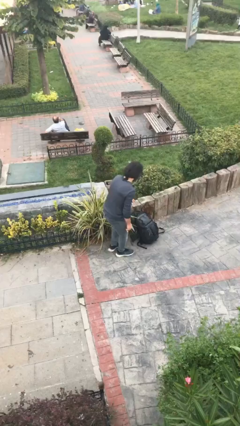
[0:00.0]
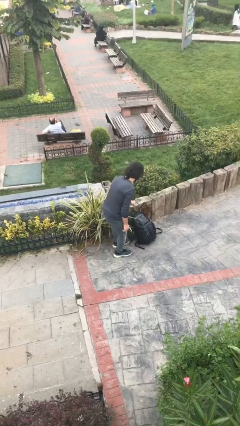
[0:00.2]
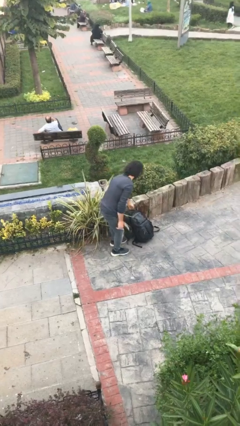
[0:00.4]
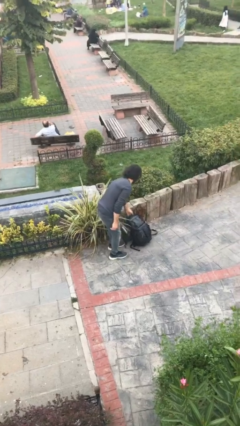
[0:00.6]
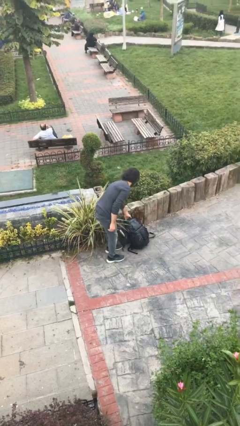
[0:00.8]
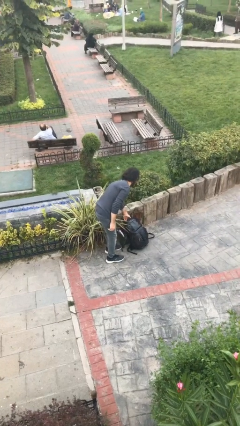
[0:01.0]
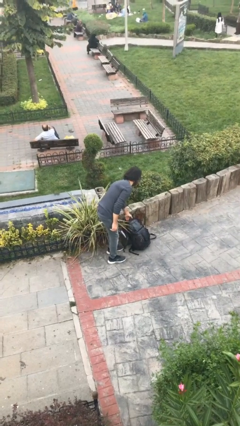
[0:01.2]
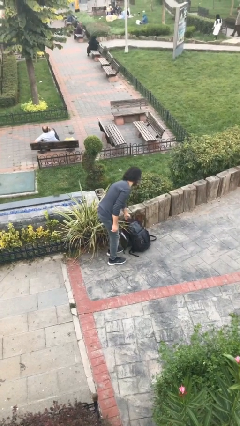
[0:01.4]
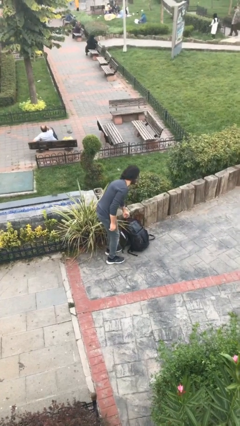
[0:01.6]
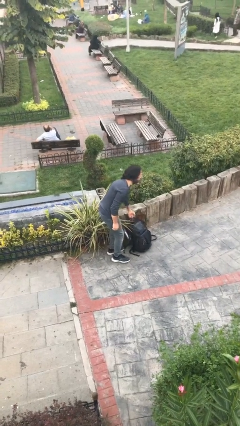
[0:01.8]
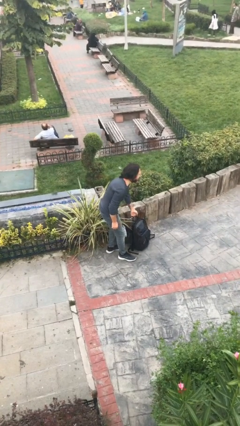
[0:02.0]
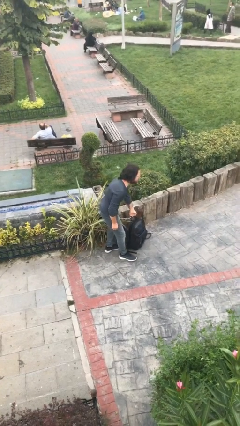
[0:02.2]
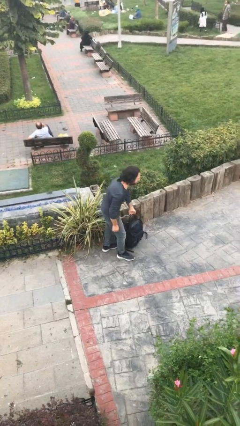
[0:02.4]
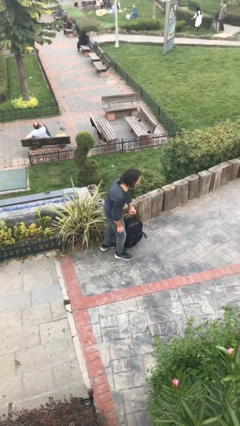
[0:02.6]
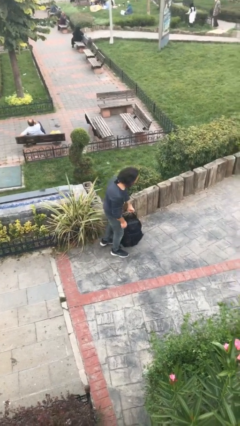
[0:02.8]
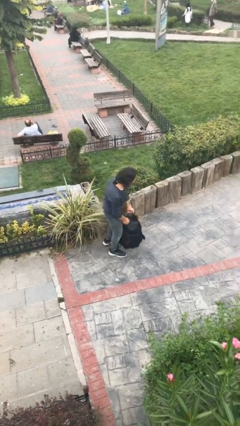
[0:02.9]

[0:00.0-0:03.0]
person picks up object from floor

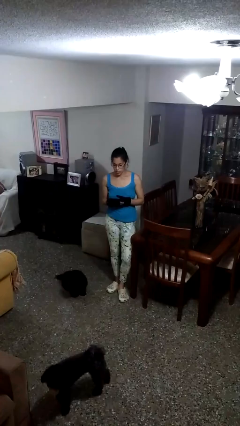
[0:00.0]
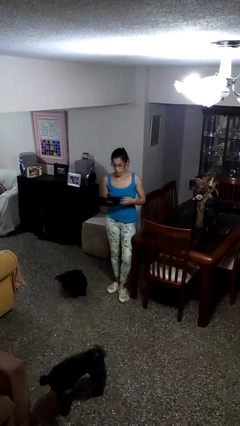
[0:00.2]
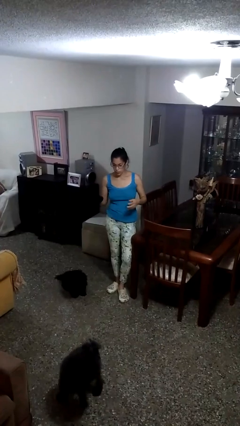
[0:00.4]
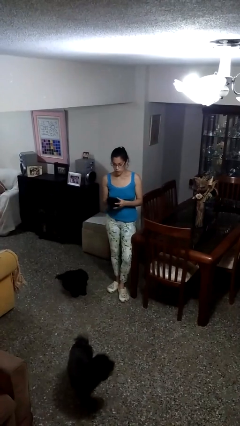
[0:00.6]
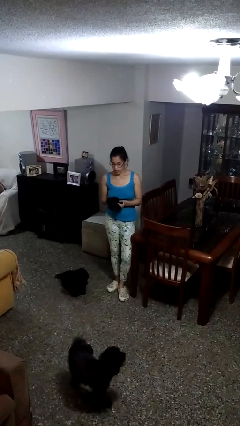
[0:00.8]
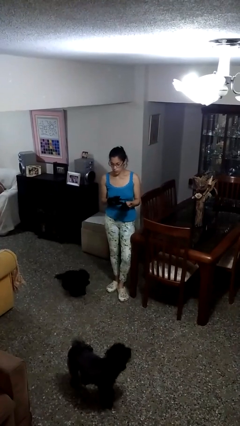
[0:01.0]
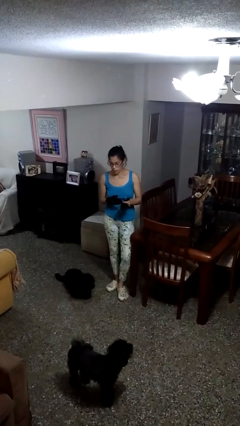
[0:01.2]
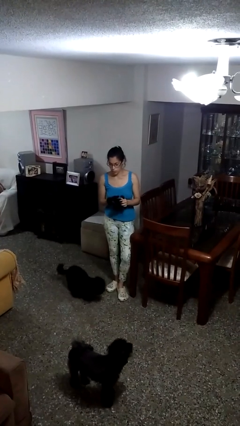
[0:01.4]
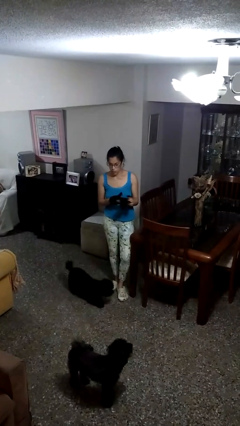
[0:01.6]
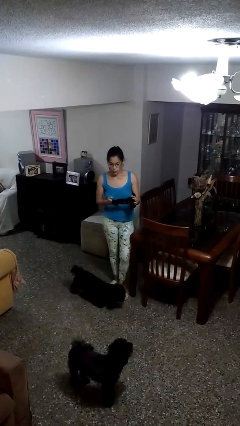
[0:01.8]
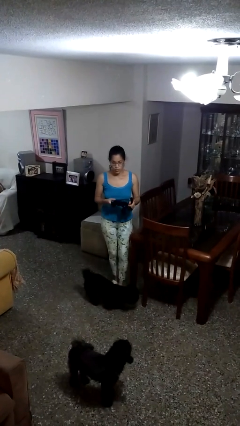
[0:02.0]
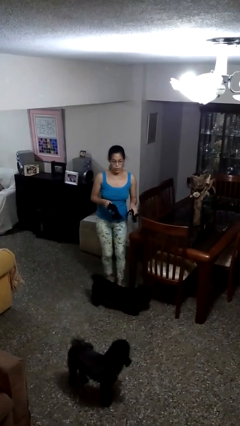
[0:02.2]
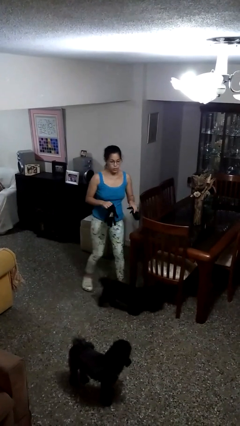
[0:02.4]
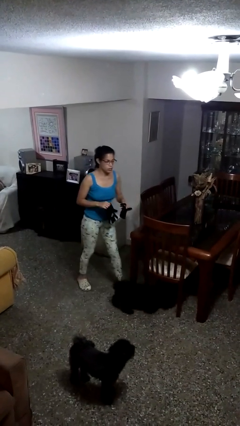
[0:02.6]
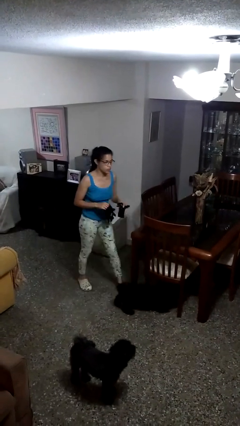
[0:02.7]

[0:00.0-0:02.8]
person takes off gloves

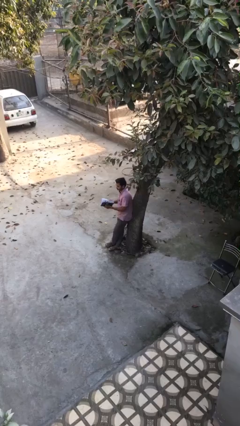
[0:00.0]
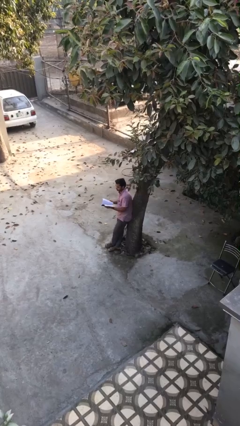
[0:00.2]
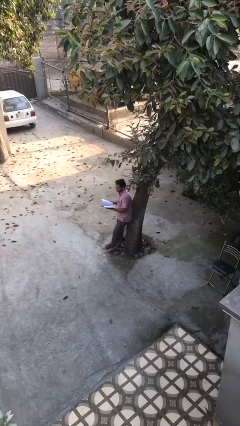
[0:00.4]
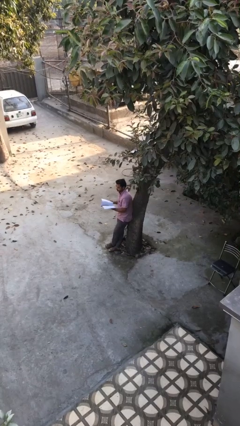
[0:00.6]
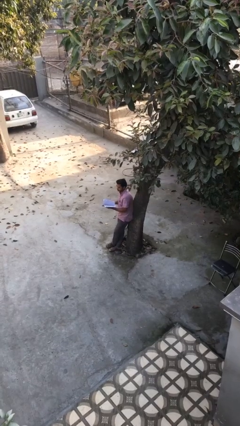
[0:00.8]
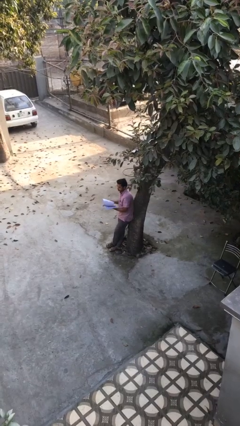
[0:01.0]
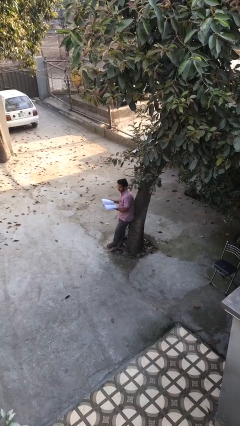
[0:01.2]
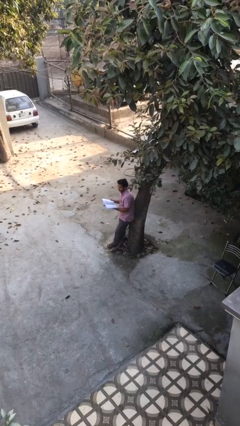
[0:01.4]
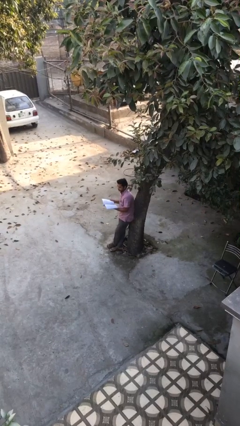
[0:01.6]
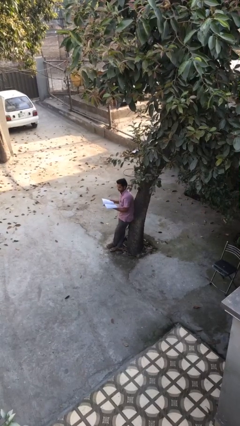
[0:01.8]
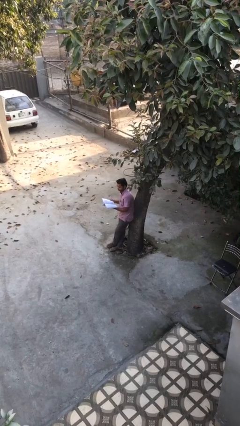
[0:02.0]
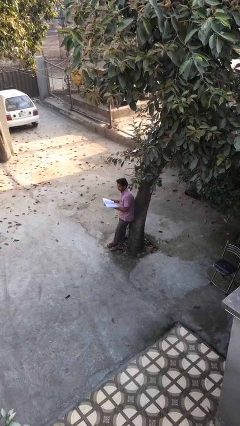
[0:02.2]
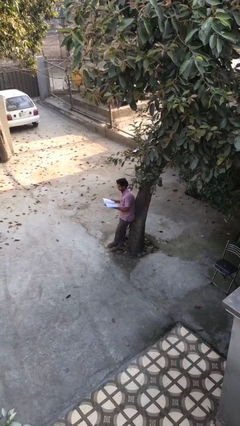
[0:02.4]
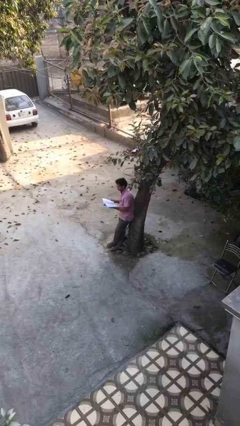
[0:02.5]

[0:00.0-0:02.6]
person reads document

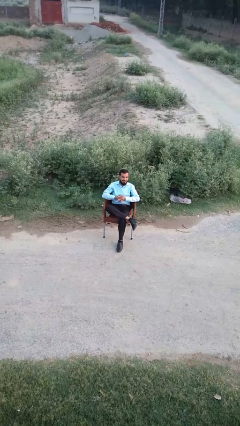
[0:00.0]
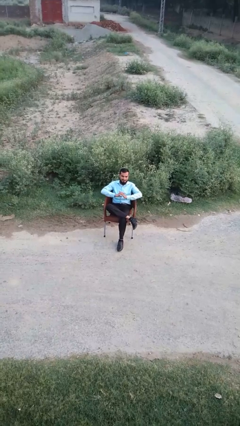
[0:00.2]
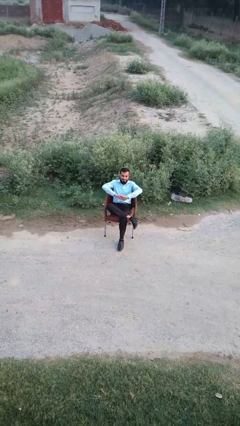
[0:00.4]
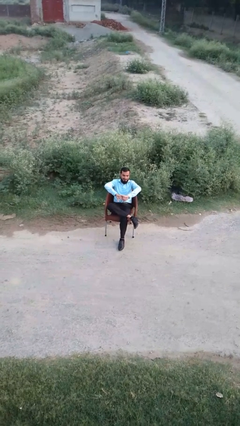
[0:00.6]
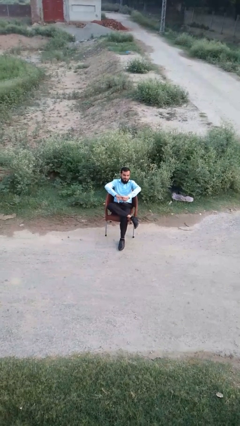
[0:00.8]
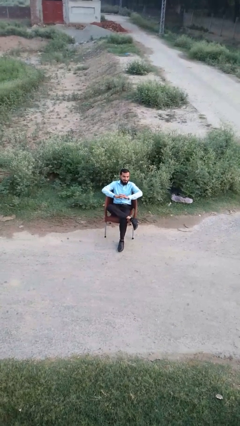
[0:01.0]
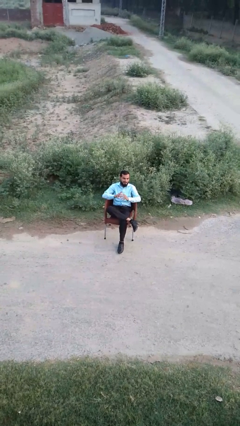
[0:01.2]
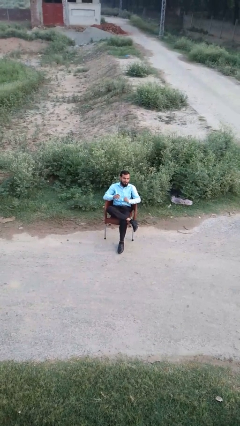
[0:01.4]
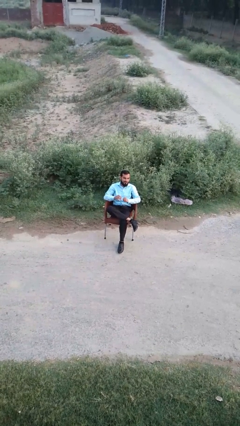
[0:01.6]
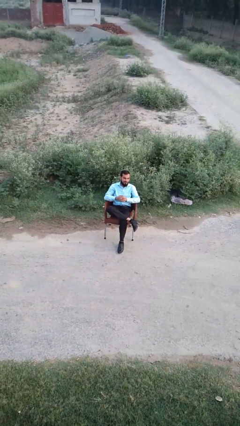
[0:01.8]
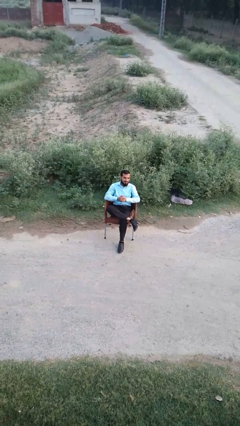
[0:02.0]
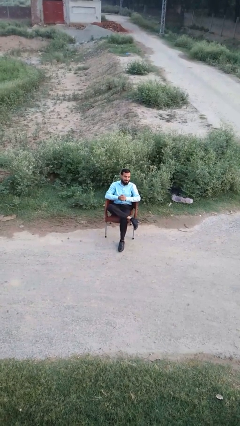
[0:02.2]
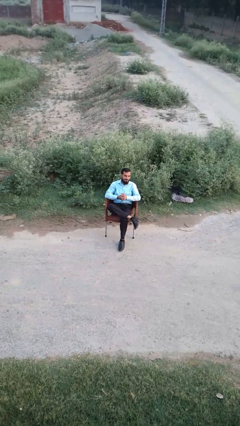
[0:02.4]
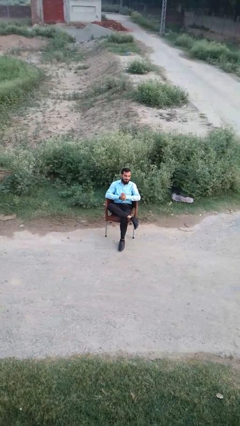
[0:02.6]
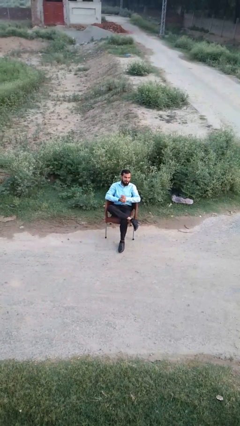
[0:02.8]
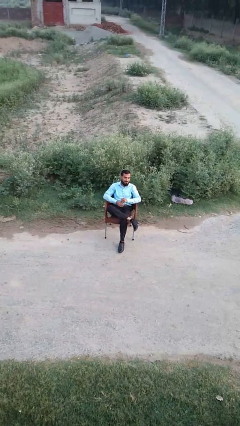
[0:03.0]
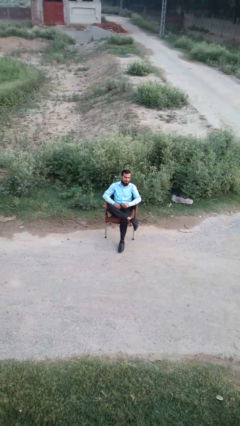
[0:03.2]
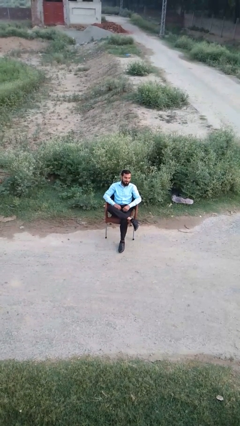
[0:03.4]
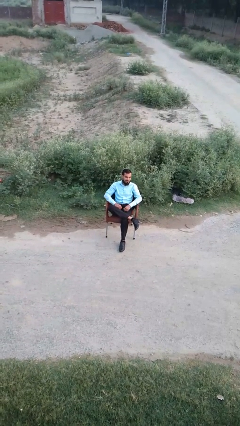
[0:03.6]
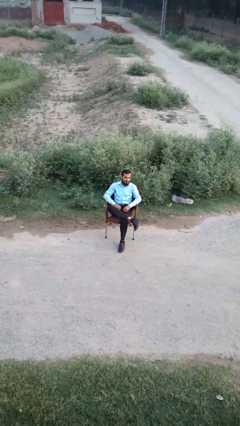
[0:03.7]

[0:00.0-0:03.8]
person cracks knuckles

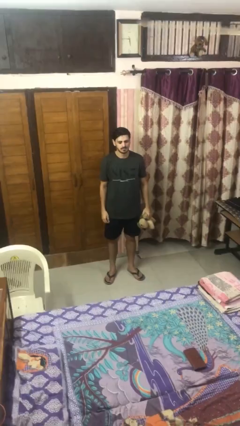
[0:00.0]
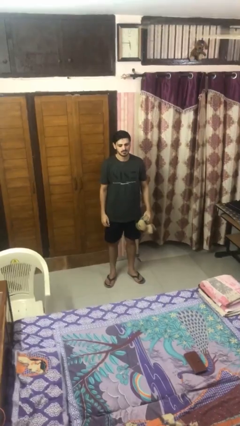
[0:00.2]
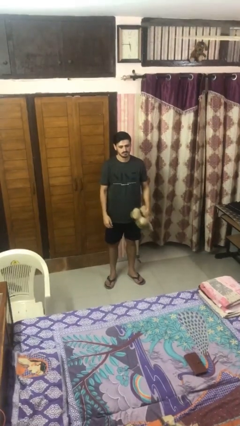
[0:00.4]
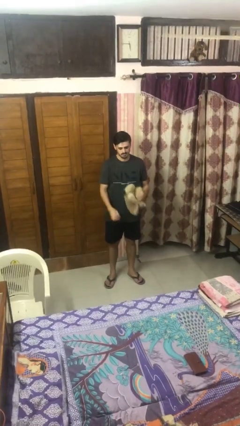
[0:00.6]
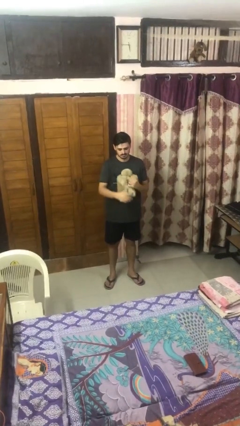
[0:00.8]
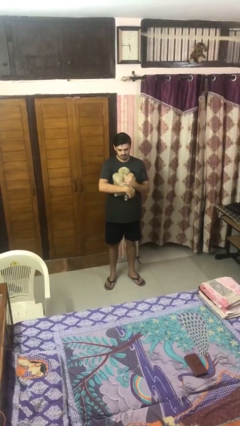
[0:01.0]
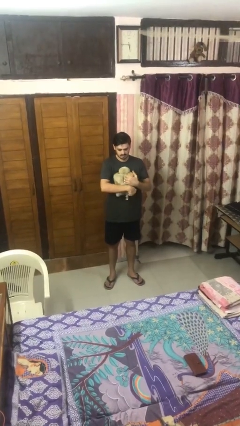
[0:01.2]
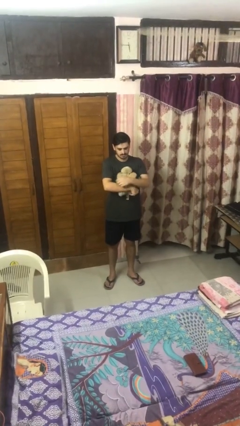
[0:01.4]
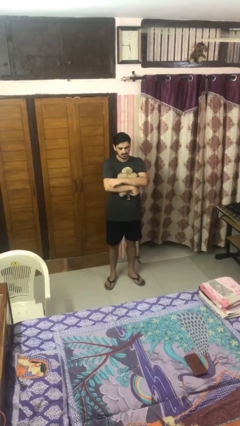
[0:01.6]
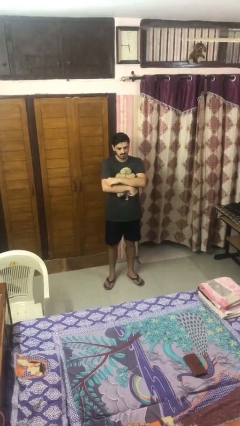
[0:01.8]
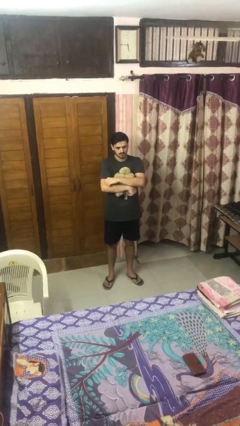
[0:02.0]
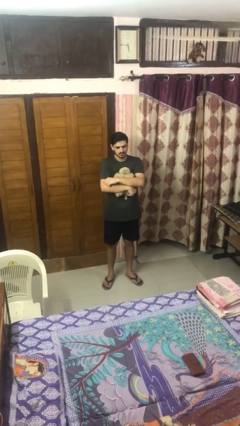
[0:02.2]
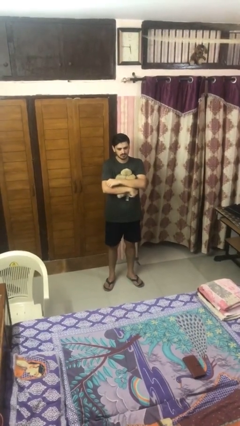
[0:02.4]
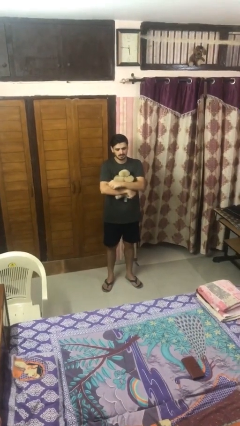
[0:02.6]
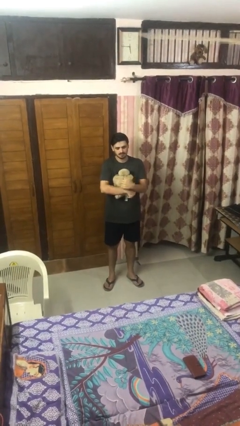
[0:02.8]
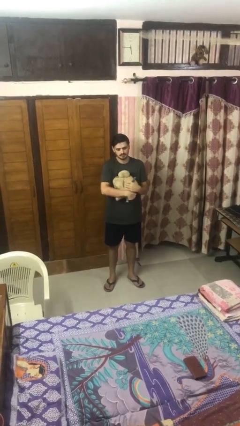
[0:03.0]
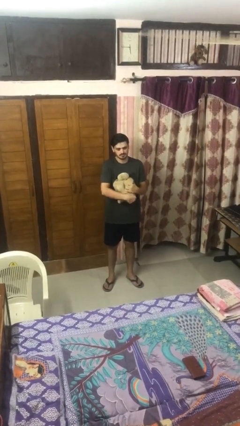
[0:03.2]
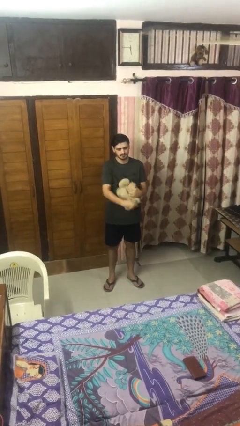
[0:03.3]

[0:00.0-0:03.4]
person hugs stuffed animal

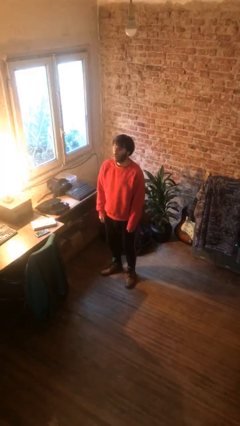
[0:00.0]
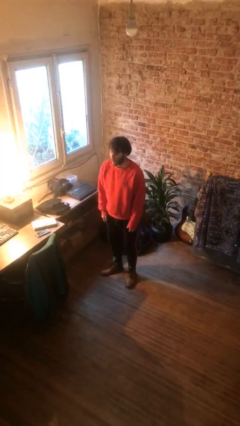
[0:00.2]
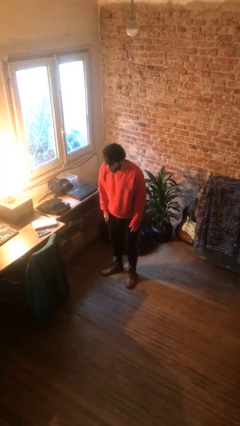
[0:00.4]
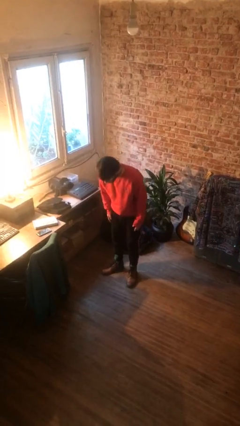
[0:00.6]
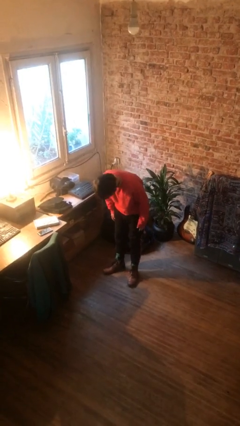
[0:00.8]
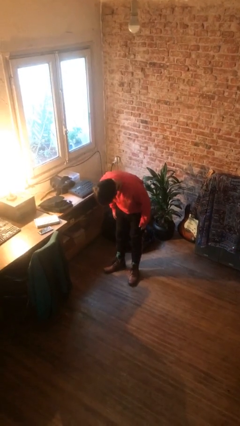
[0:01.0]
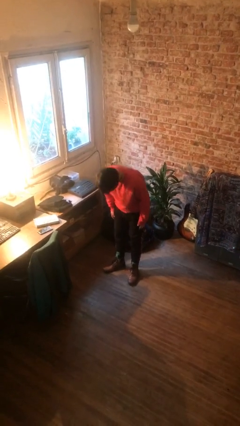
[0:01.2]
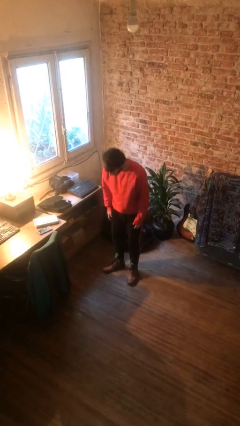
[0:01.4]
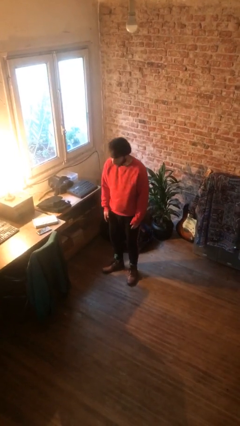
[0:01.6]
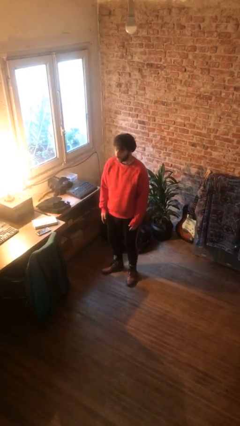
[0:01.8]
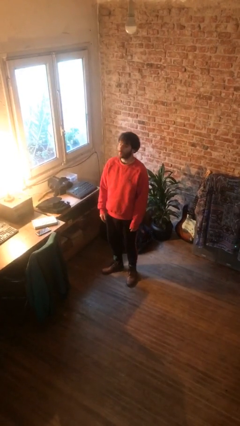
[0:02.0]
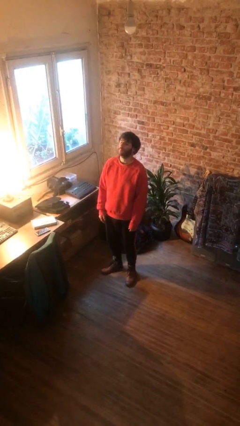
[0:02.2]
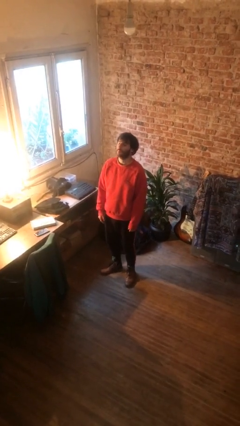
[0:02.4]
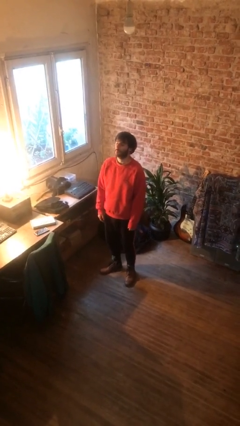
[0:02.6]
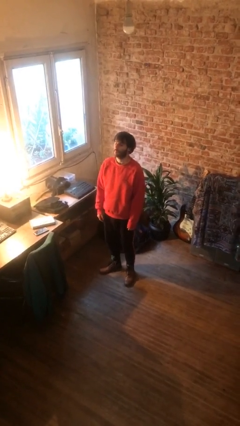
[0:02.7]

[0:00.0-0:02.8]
person bows
